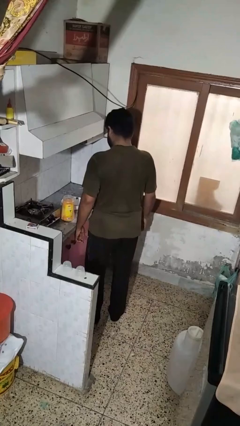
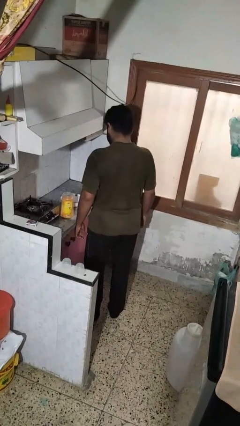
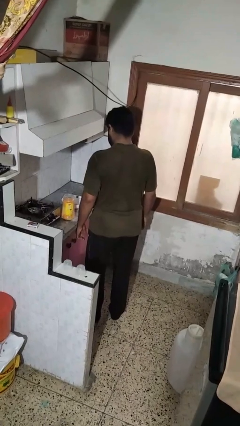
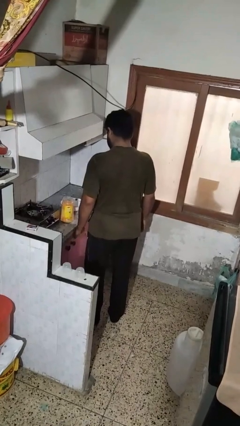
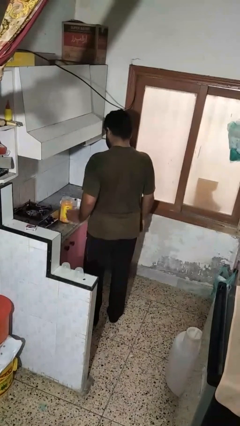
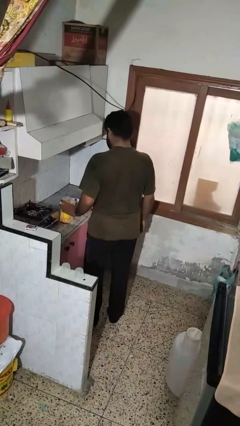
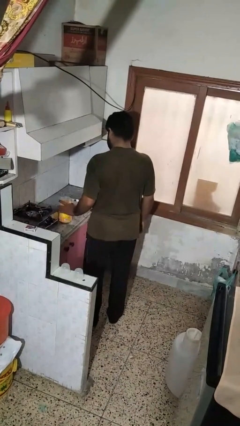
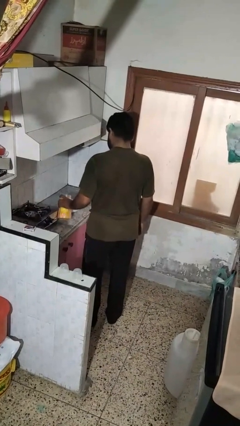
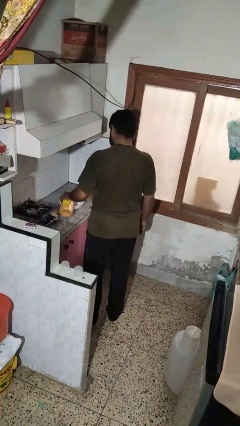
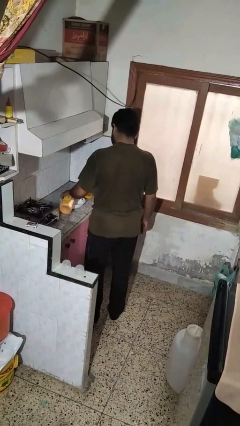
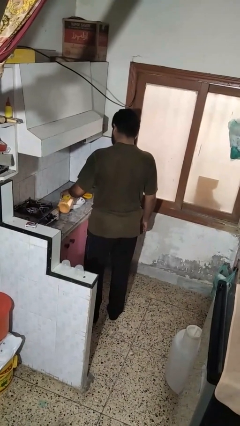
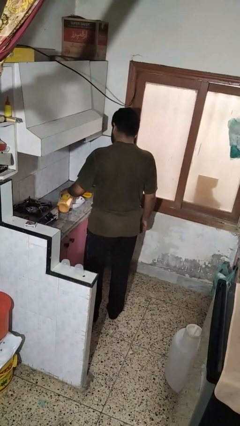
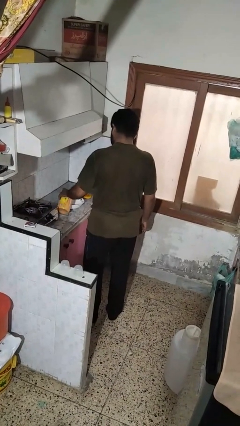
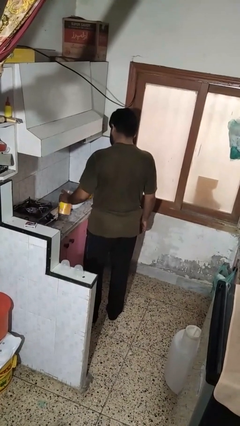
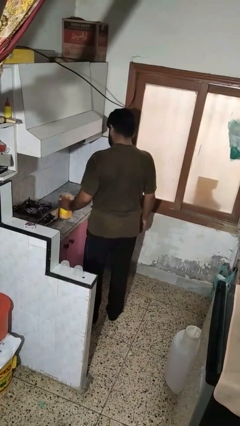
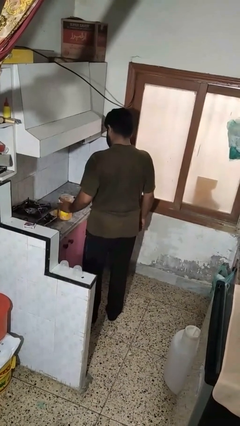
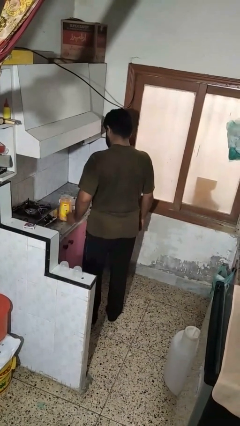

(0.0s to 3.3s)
person pours into bowl

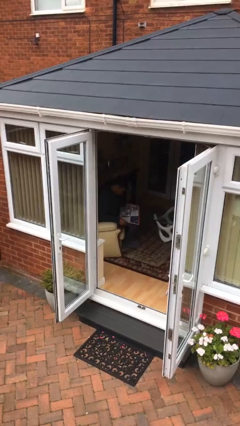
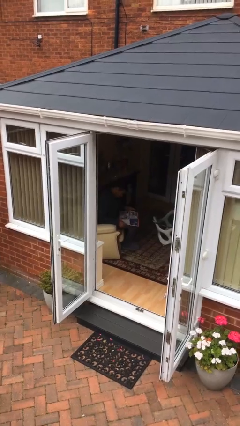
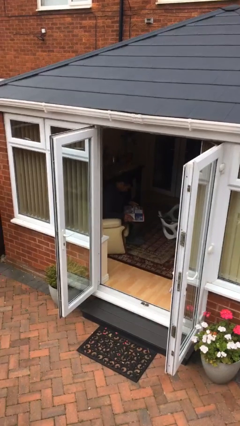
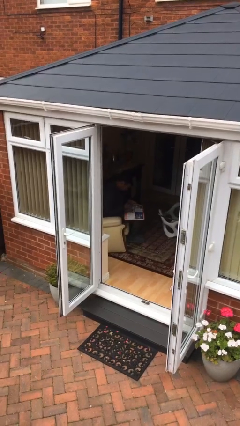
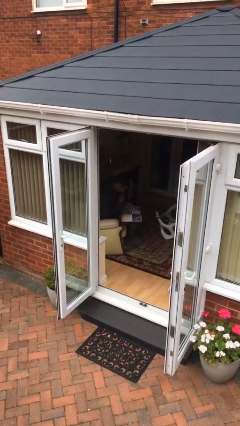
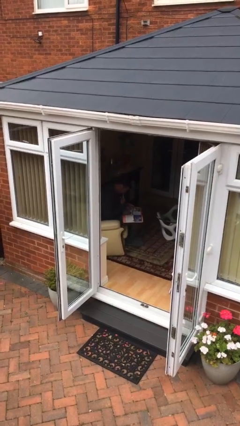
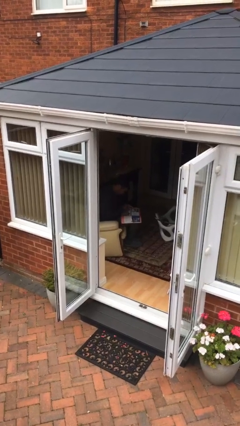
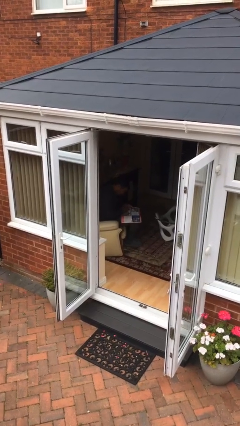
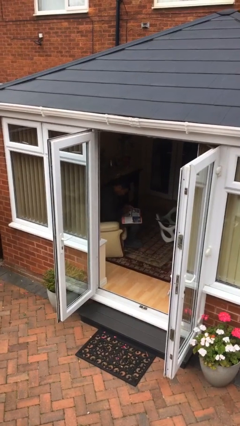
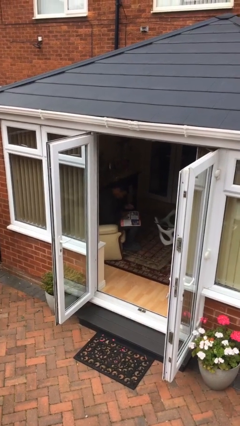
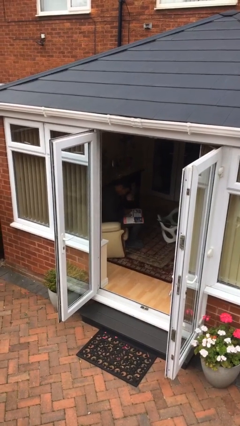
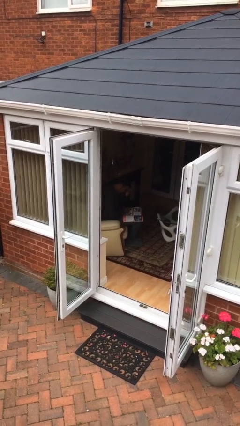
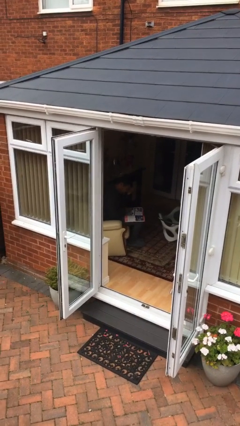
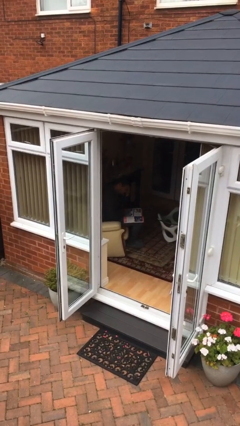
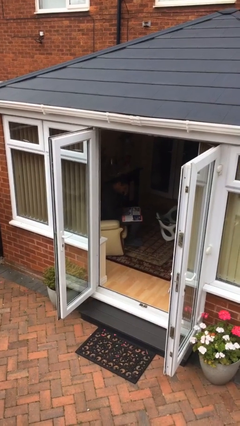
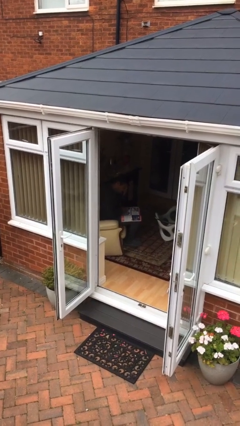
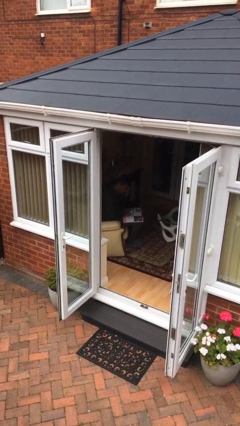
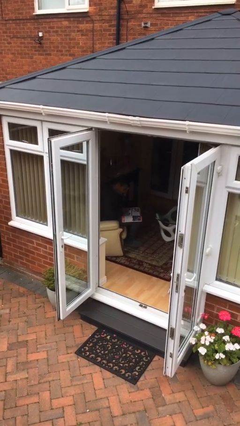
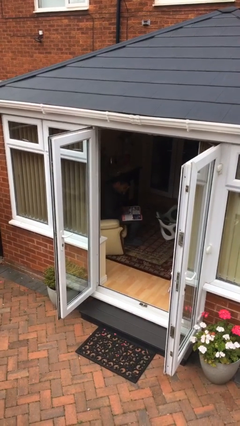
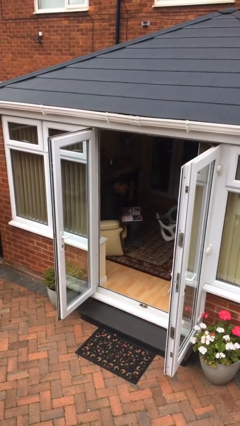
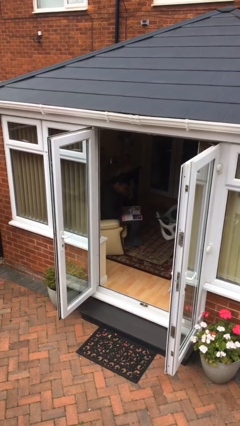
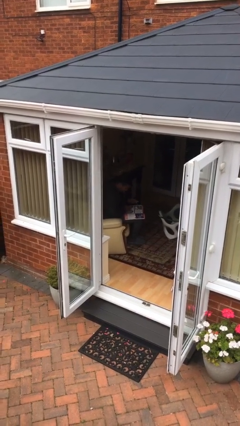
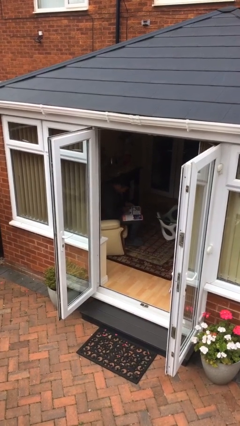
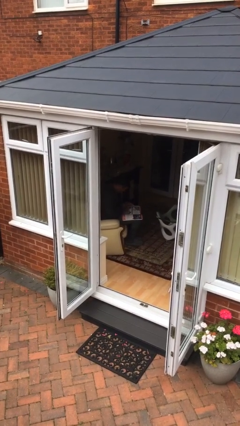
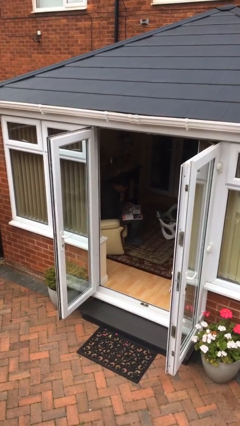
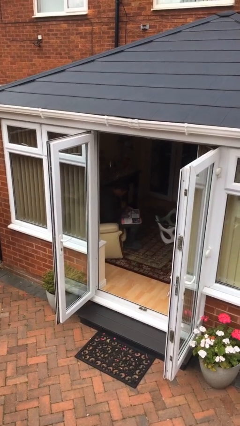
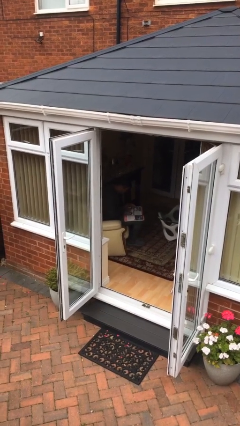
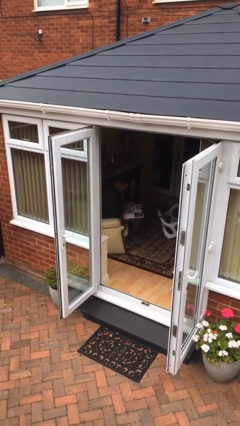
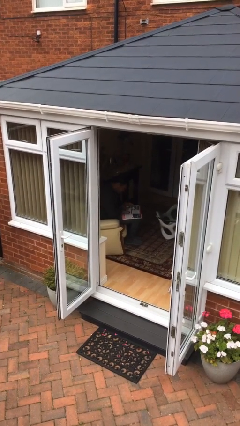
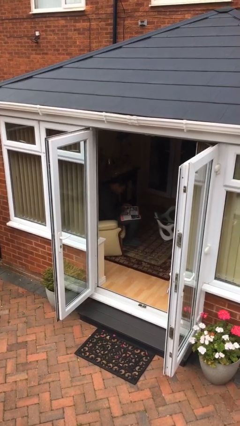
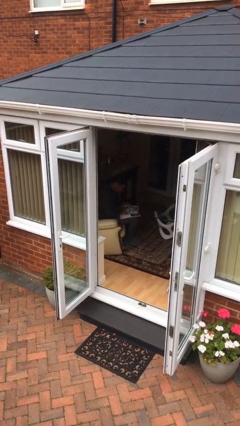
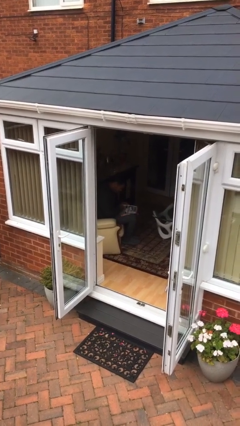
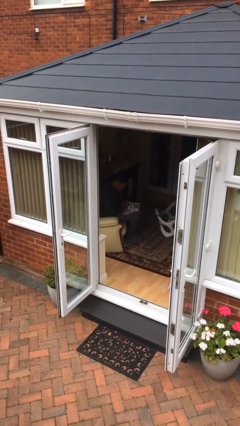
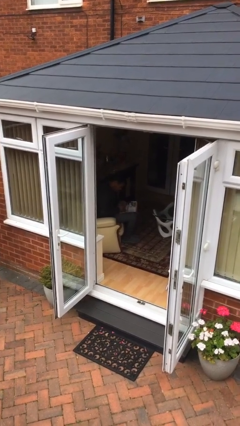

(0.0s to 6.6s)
person reads document

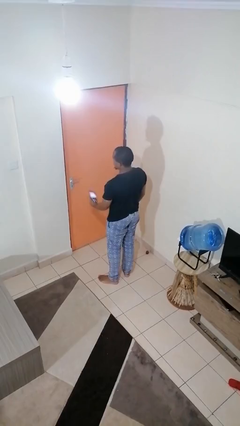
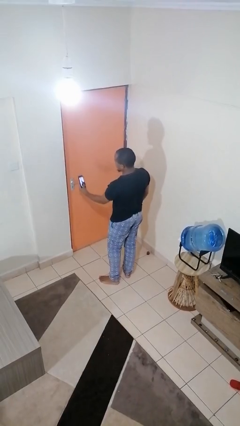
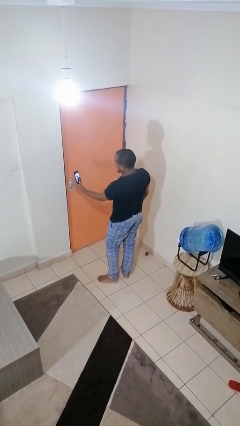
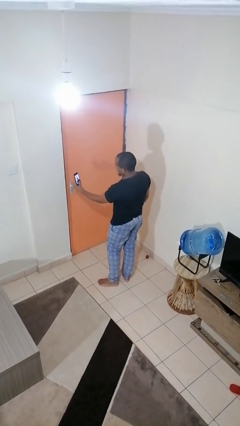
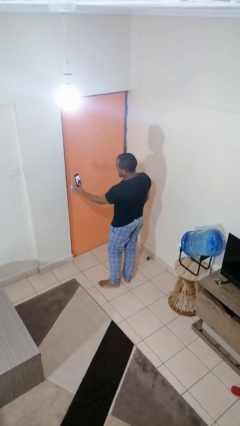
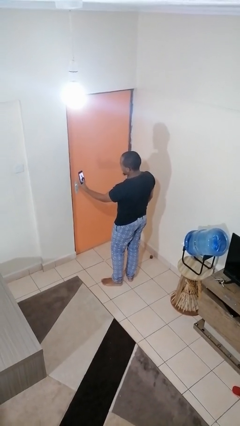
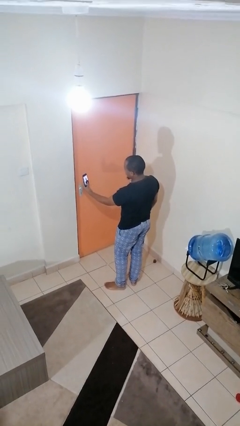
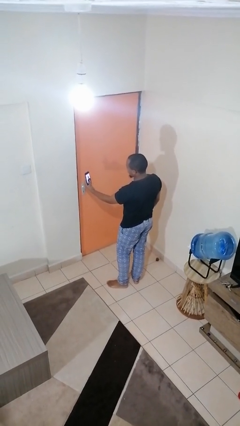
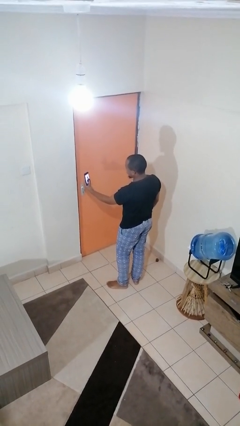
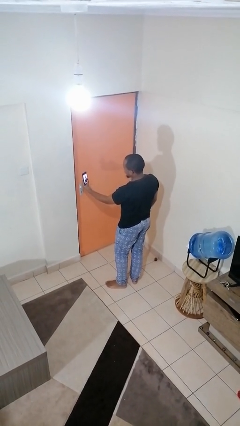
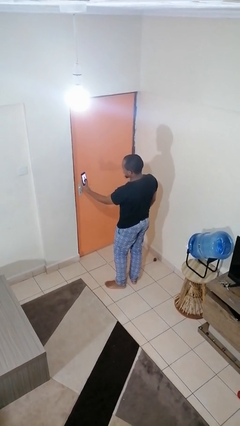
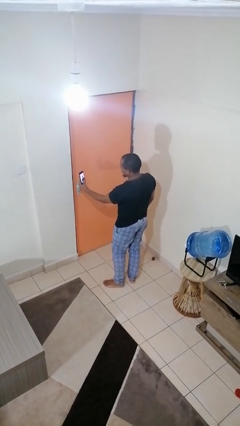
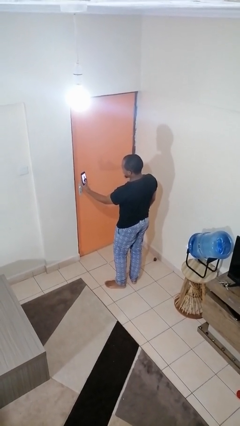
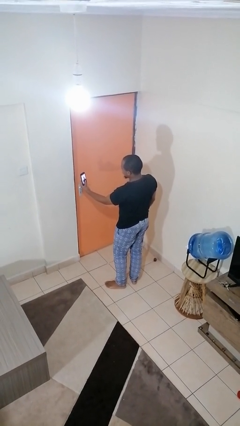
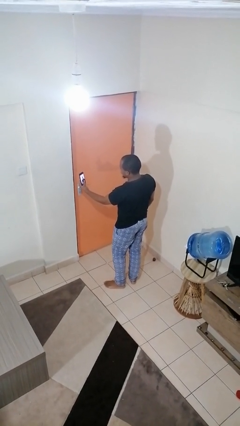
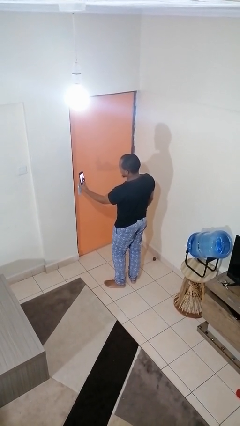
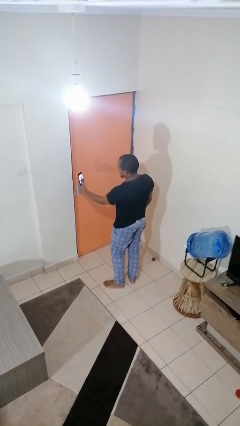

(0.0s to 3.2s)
person takes selfie

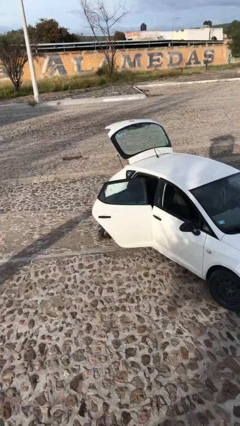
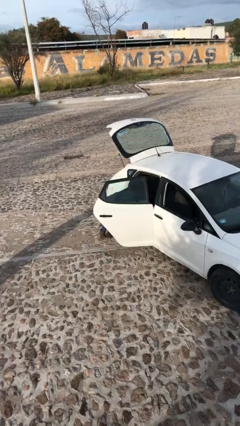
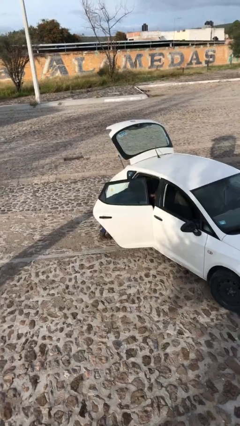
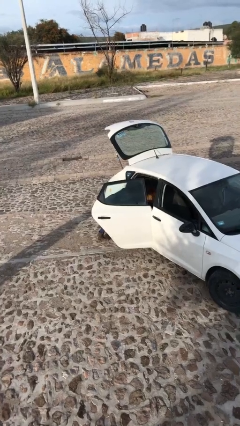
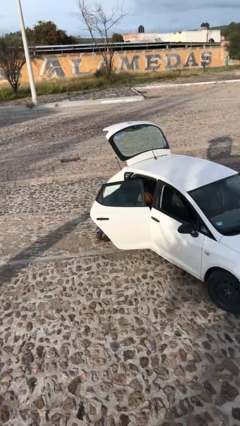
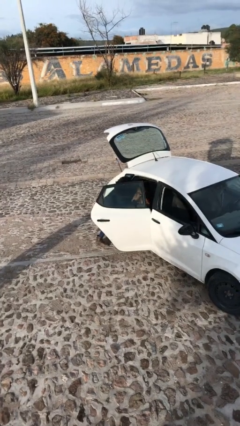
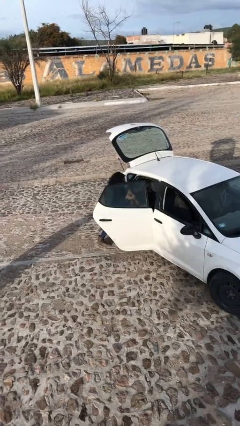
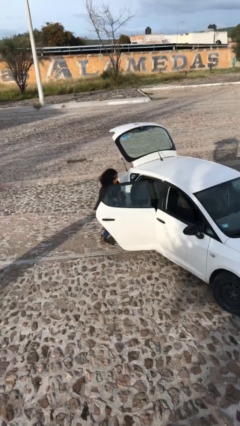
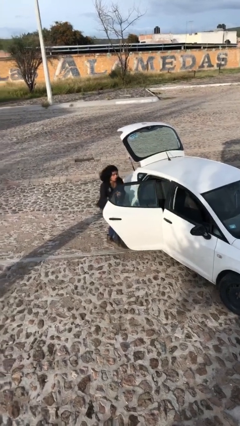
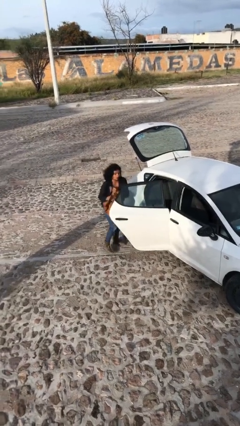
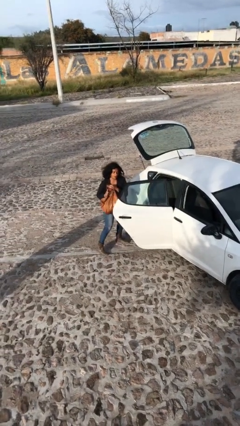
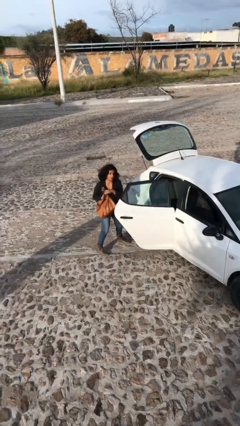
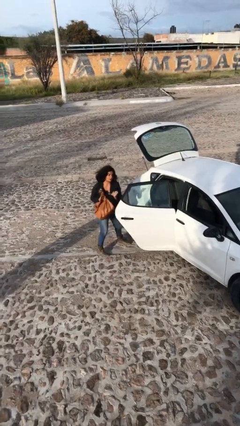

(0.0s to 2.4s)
person unloads car

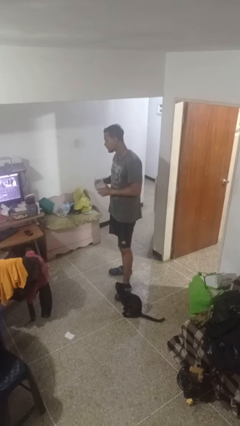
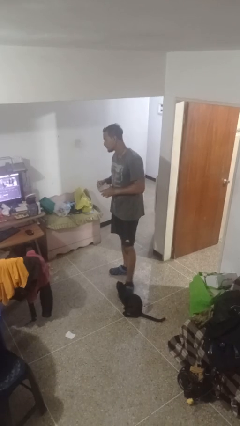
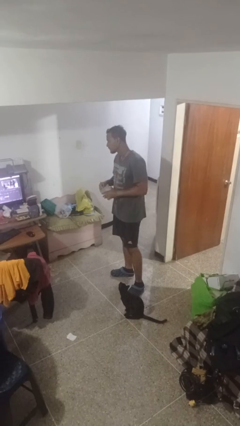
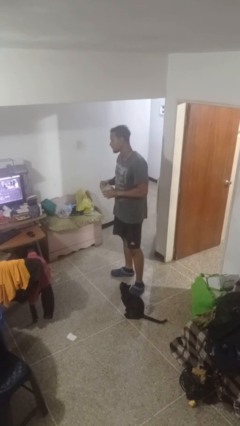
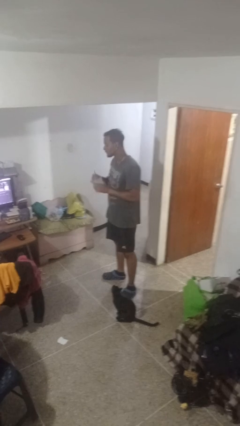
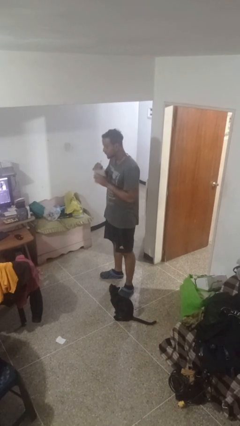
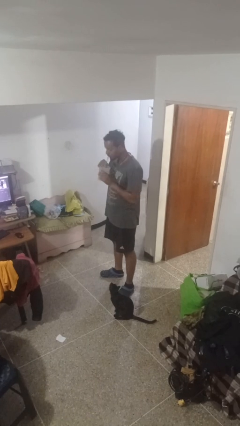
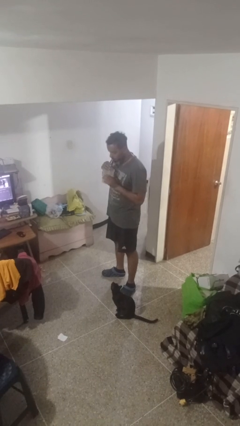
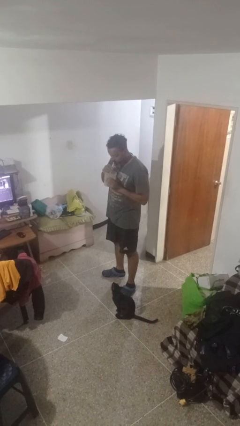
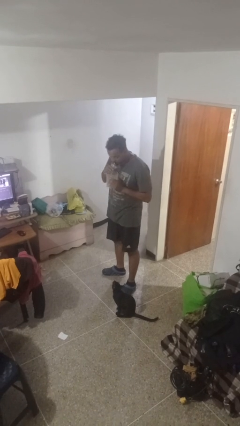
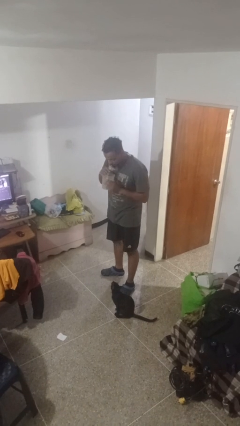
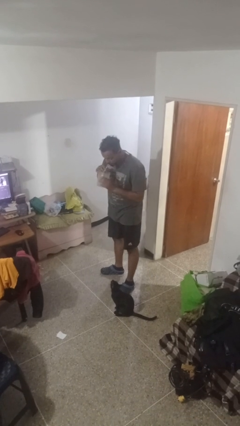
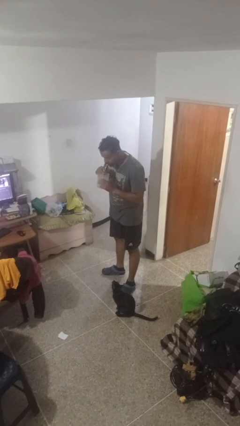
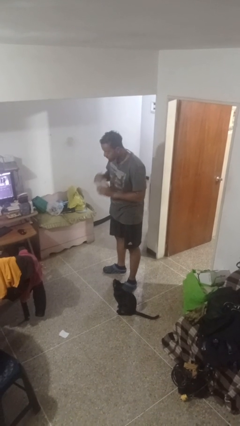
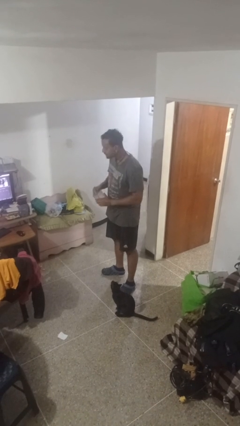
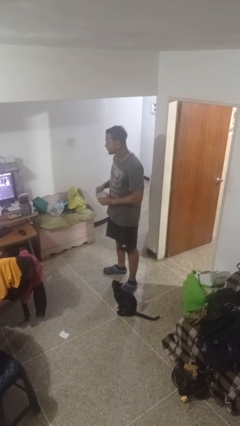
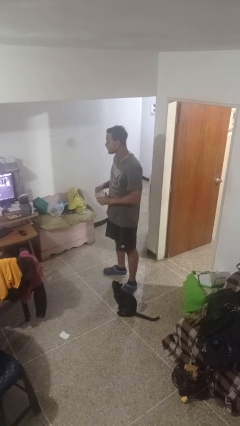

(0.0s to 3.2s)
person drinks from straw
